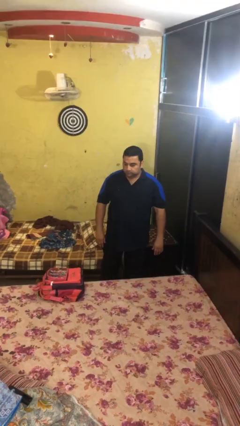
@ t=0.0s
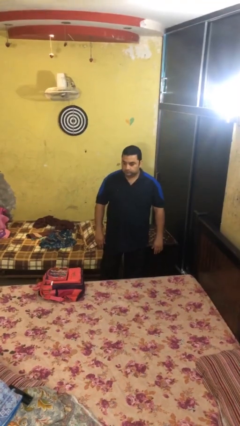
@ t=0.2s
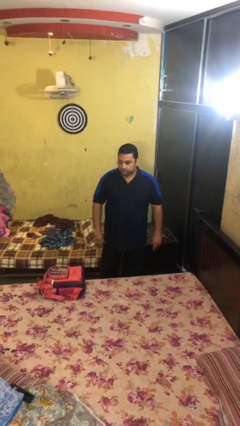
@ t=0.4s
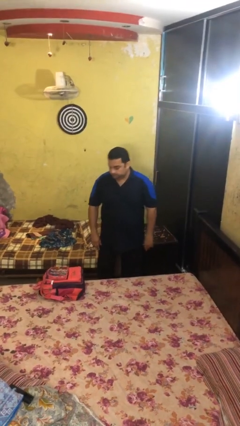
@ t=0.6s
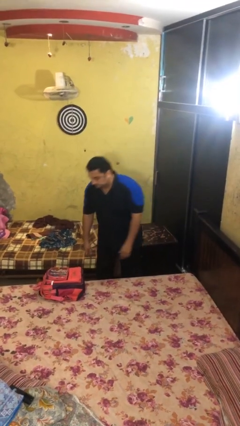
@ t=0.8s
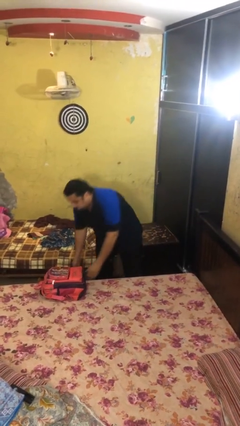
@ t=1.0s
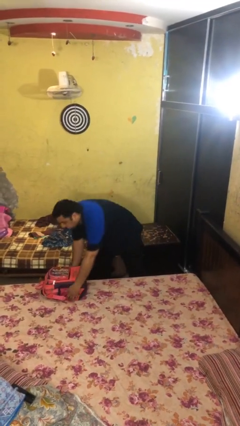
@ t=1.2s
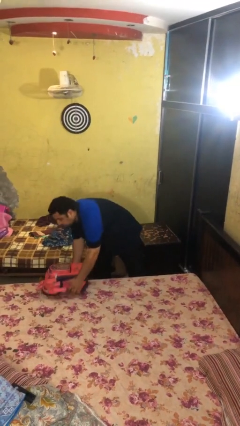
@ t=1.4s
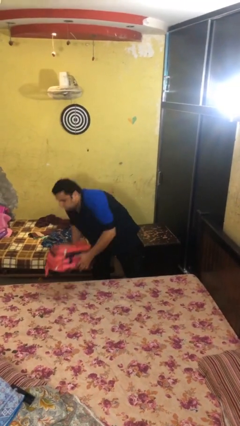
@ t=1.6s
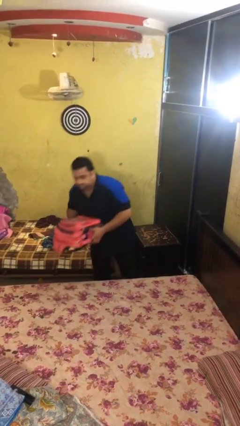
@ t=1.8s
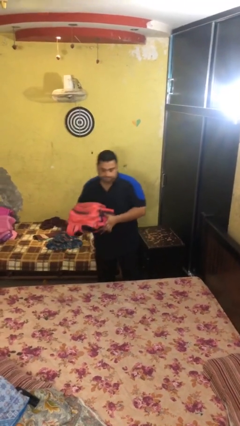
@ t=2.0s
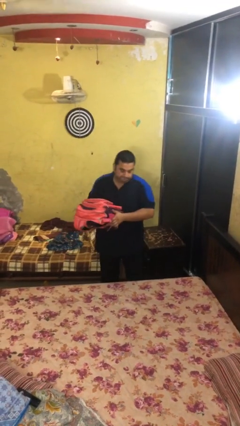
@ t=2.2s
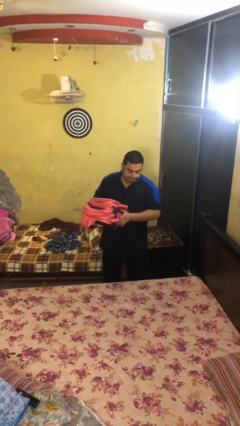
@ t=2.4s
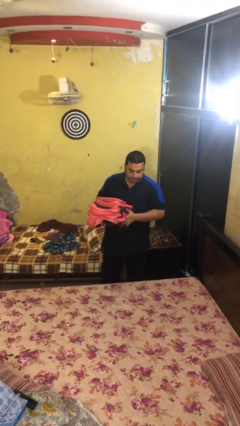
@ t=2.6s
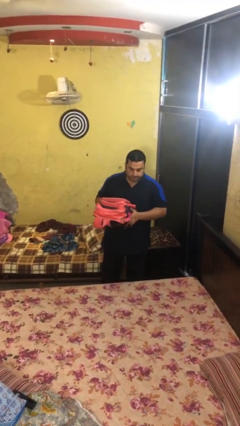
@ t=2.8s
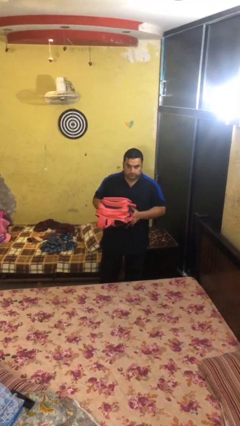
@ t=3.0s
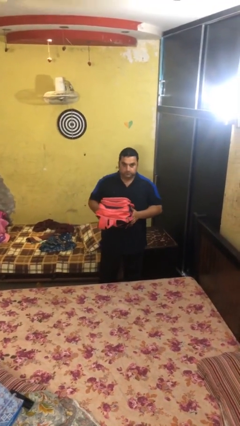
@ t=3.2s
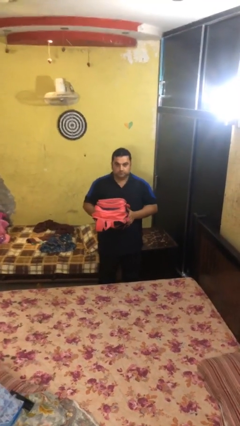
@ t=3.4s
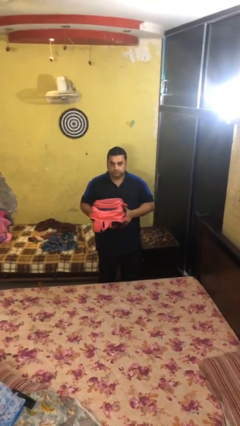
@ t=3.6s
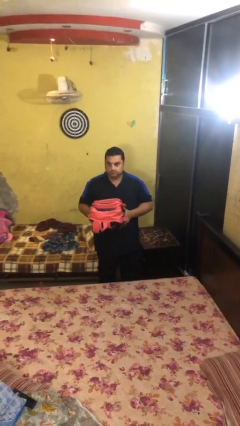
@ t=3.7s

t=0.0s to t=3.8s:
person picks up object from bed

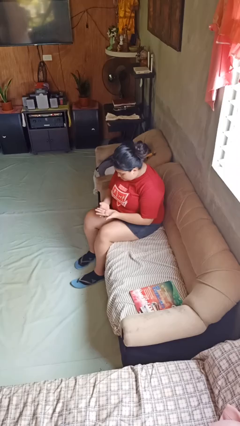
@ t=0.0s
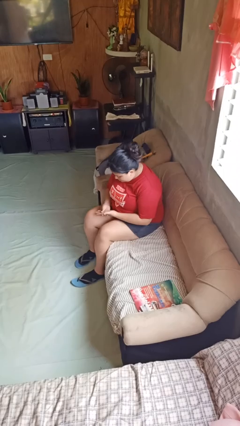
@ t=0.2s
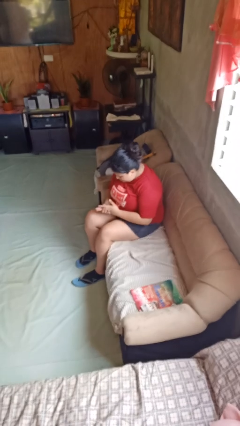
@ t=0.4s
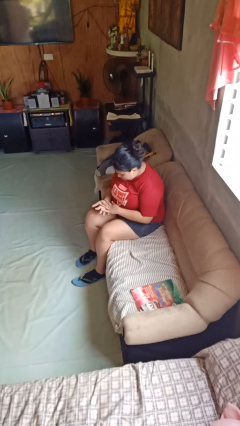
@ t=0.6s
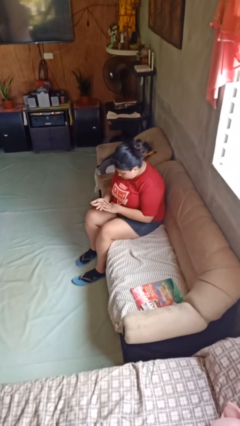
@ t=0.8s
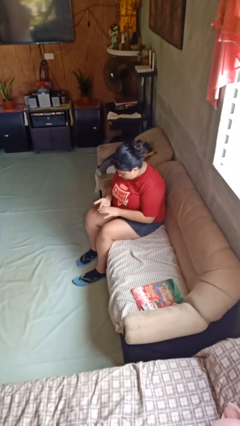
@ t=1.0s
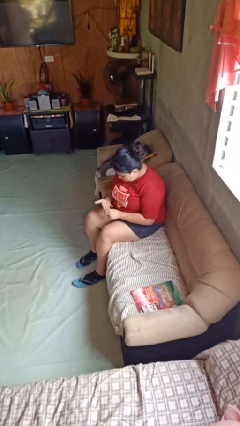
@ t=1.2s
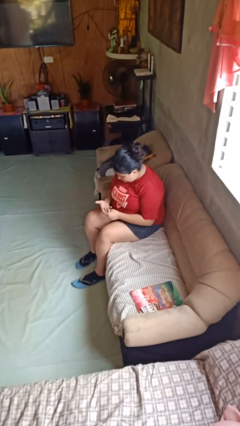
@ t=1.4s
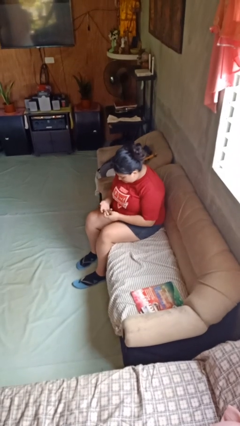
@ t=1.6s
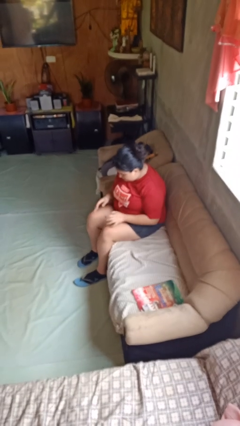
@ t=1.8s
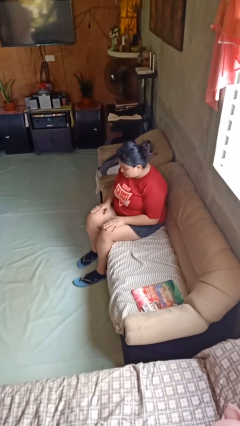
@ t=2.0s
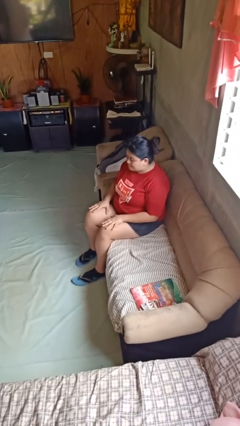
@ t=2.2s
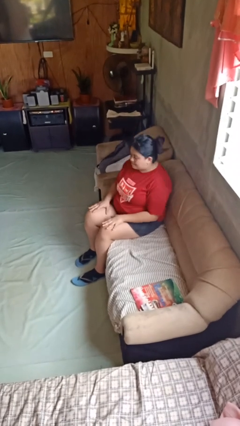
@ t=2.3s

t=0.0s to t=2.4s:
person looks at hands in lap

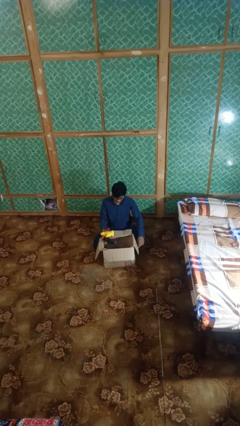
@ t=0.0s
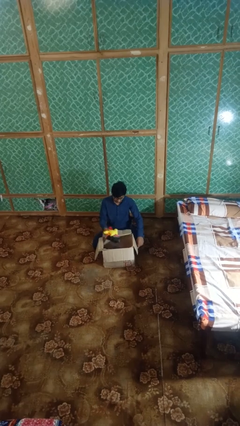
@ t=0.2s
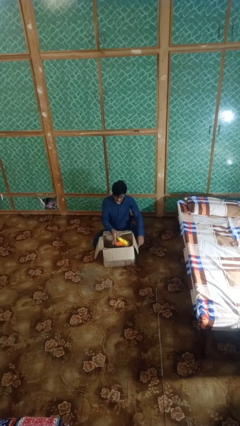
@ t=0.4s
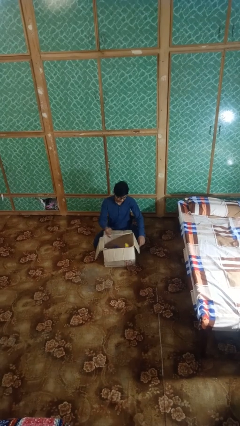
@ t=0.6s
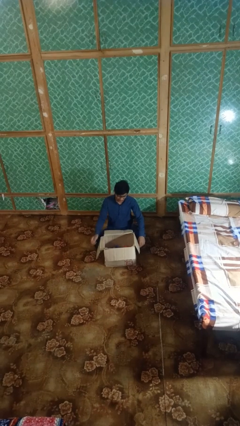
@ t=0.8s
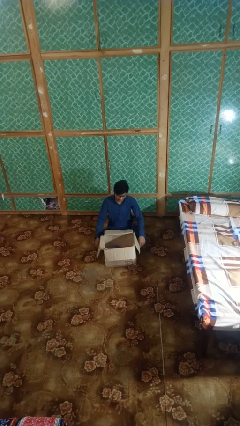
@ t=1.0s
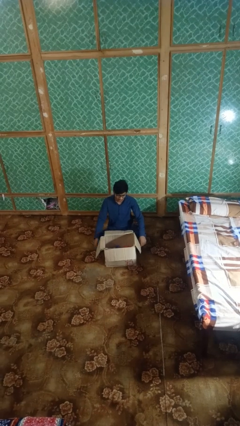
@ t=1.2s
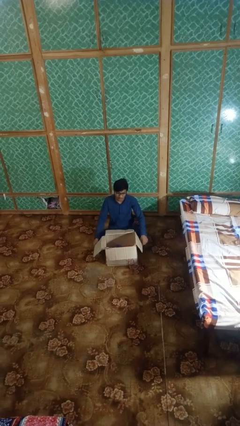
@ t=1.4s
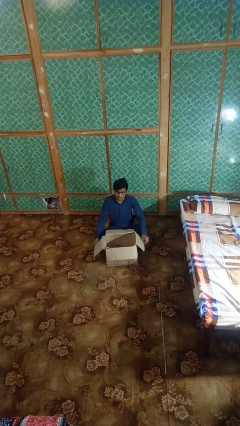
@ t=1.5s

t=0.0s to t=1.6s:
person puts object into box

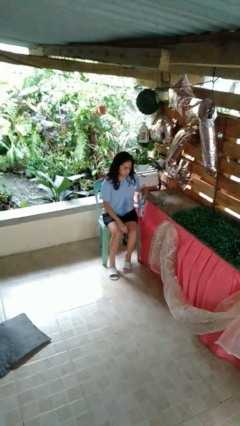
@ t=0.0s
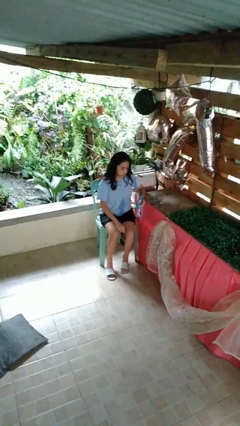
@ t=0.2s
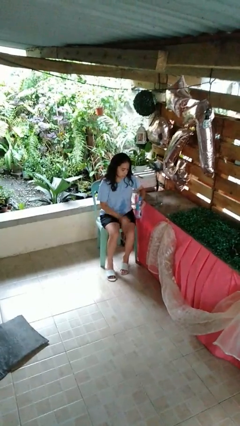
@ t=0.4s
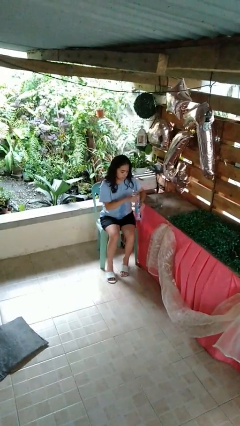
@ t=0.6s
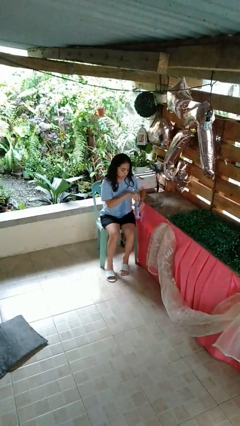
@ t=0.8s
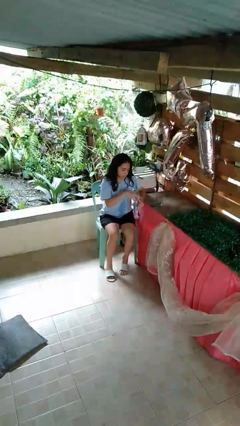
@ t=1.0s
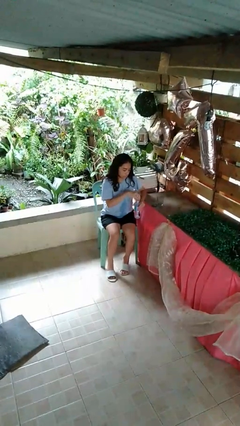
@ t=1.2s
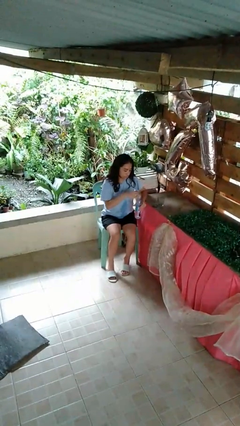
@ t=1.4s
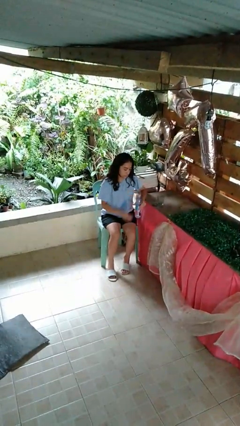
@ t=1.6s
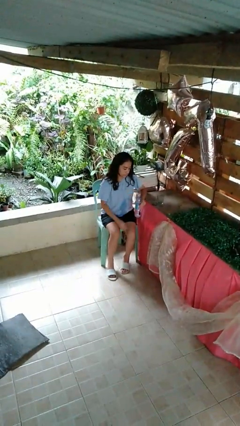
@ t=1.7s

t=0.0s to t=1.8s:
person unscrews lid from bottle

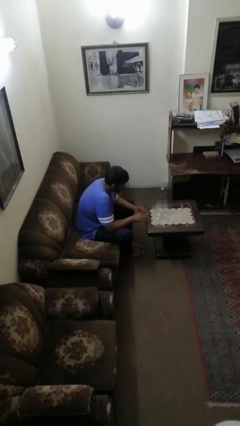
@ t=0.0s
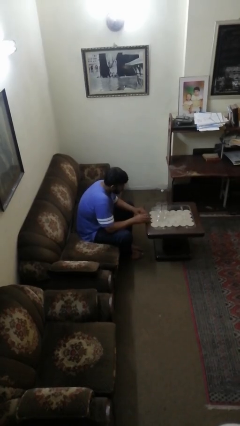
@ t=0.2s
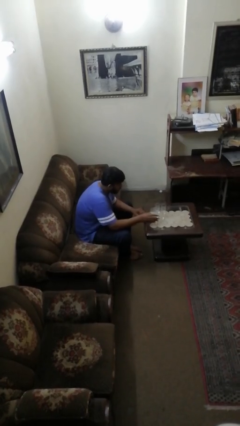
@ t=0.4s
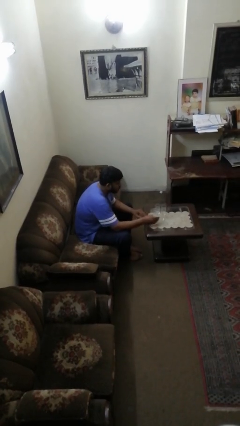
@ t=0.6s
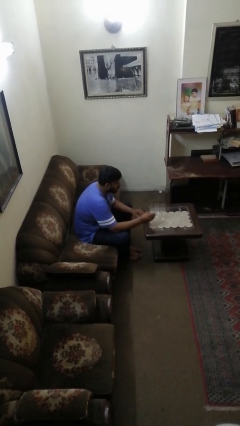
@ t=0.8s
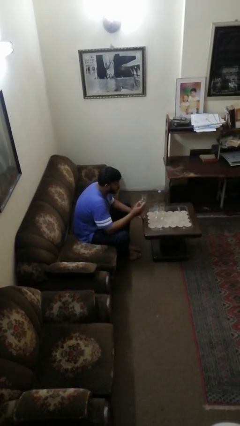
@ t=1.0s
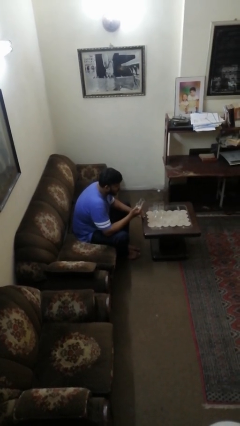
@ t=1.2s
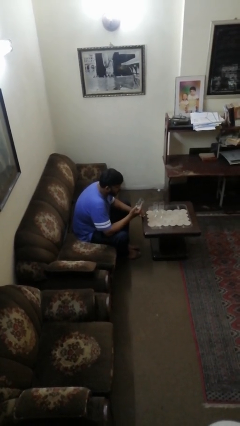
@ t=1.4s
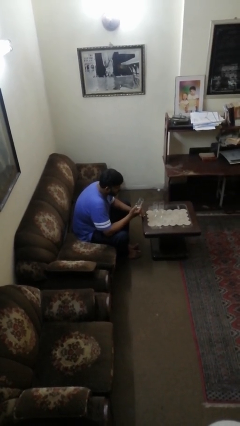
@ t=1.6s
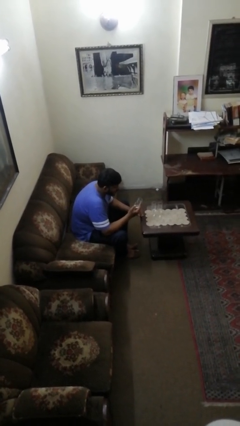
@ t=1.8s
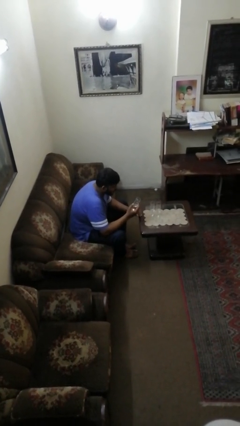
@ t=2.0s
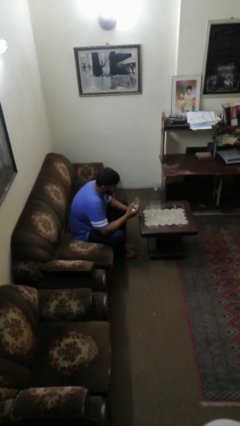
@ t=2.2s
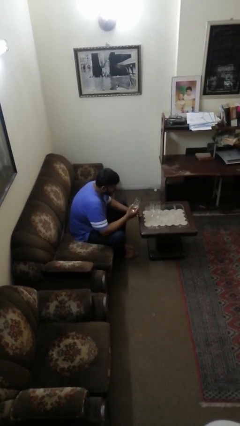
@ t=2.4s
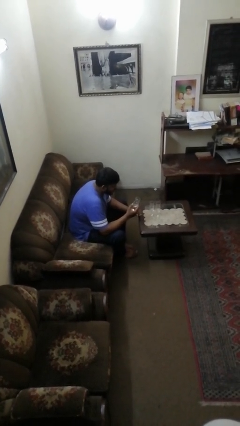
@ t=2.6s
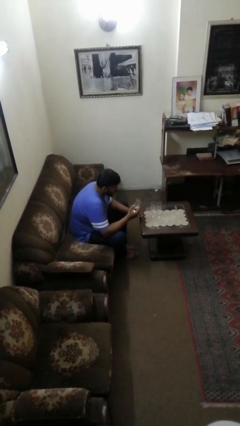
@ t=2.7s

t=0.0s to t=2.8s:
person picks up object from table

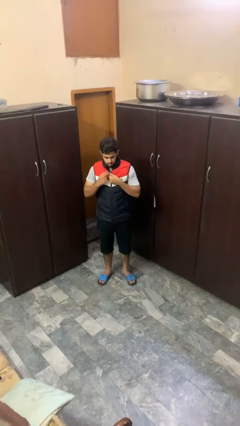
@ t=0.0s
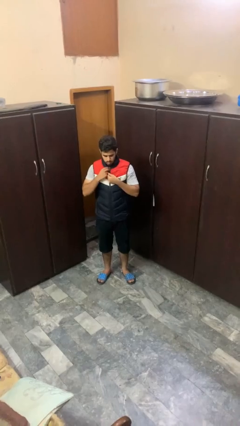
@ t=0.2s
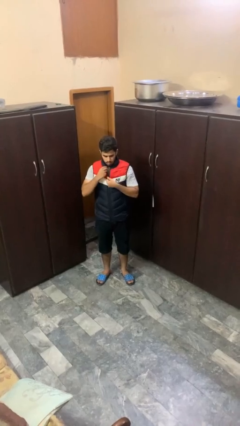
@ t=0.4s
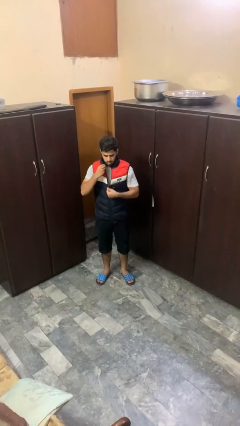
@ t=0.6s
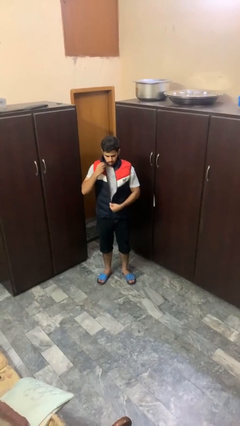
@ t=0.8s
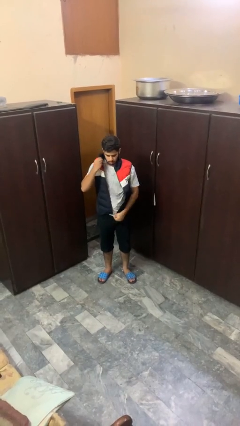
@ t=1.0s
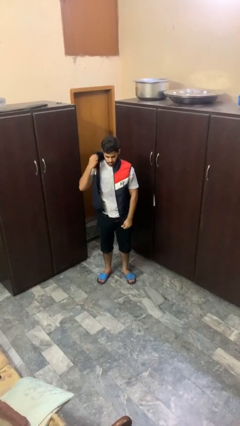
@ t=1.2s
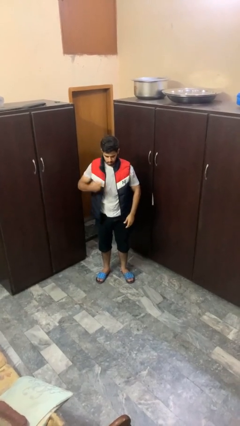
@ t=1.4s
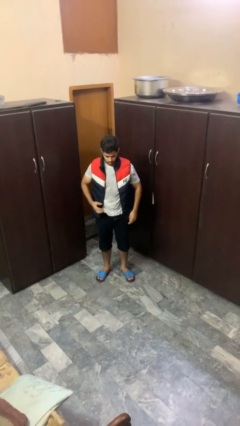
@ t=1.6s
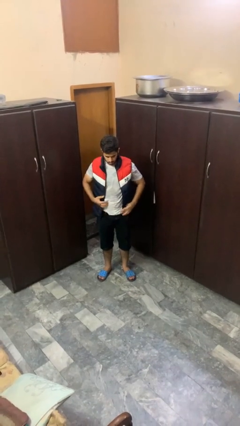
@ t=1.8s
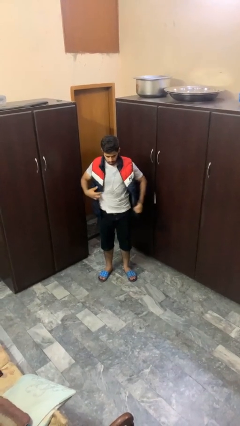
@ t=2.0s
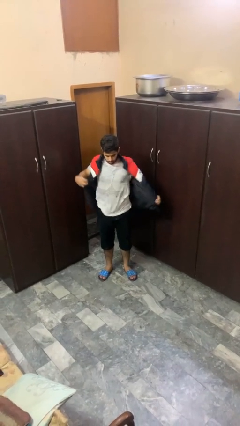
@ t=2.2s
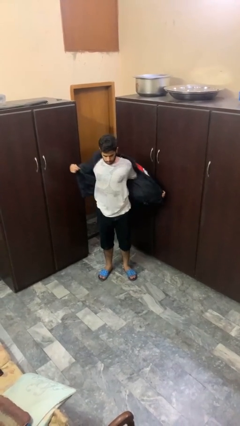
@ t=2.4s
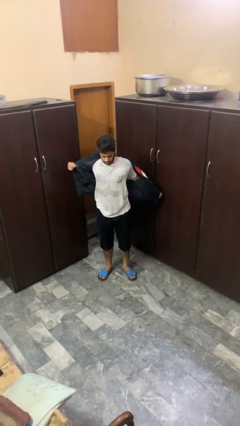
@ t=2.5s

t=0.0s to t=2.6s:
person unzips jacket

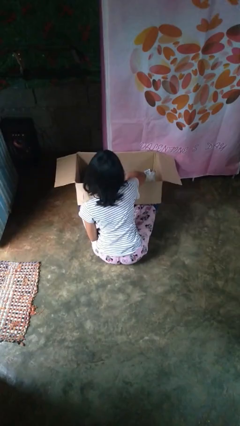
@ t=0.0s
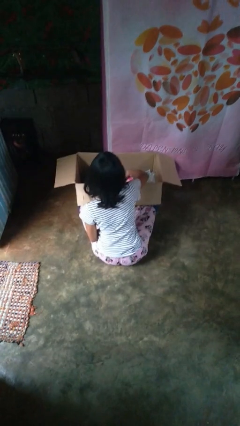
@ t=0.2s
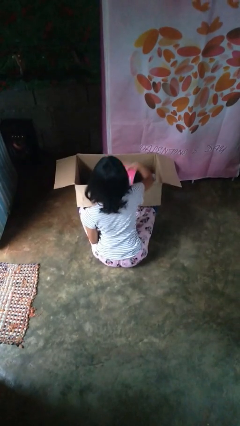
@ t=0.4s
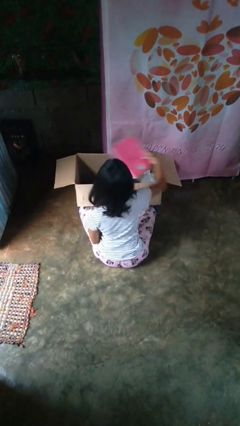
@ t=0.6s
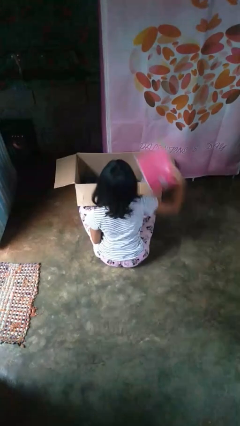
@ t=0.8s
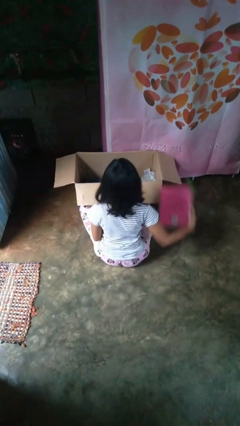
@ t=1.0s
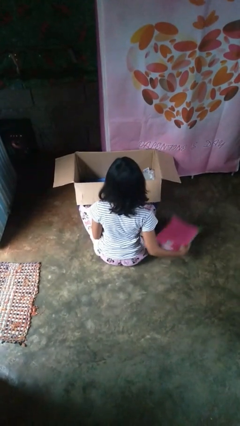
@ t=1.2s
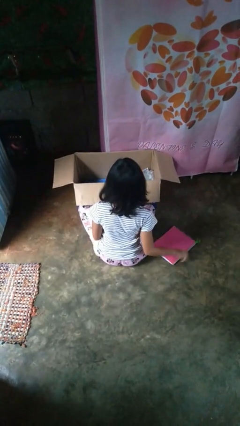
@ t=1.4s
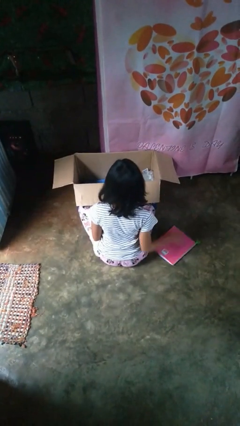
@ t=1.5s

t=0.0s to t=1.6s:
person takes object from box

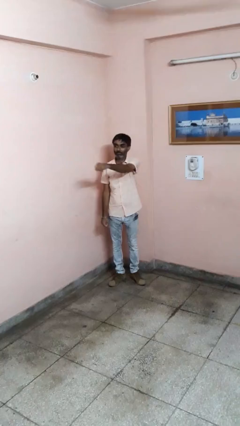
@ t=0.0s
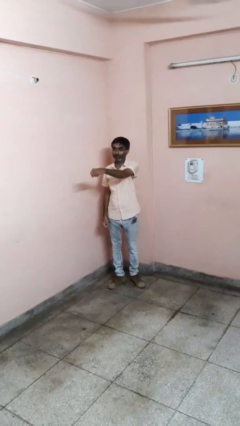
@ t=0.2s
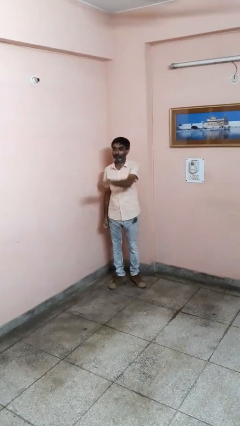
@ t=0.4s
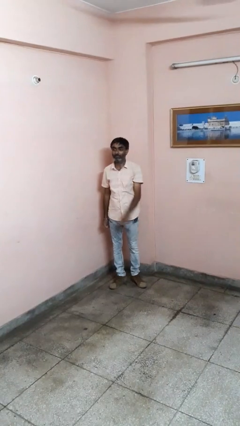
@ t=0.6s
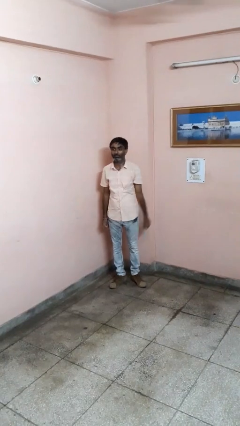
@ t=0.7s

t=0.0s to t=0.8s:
person punches
